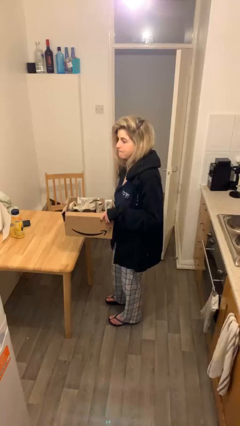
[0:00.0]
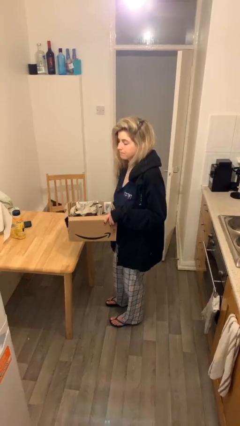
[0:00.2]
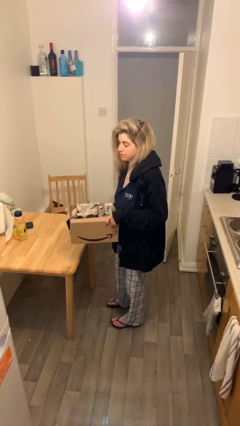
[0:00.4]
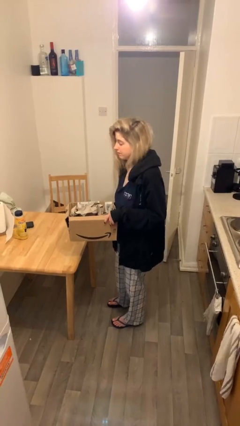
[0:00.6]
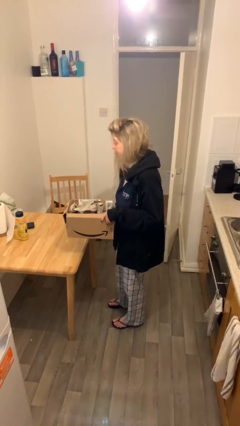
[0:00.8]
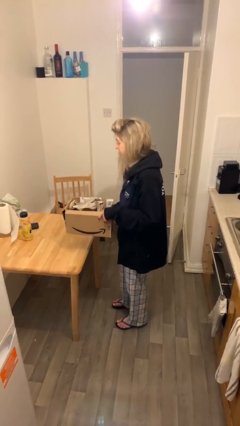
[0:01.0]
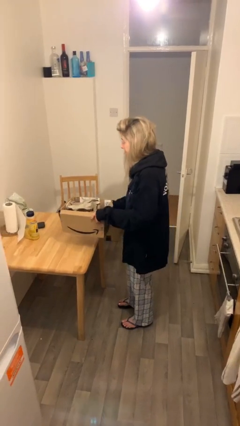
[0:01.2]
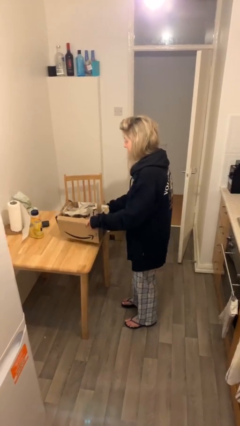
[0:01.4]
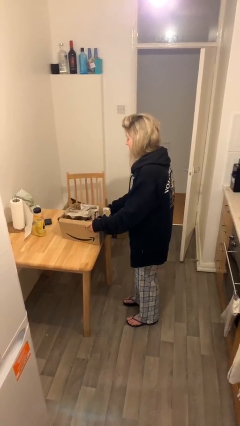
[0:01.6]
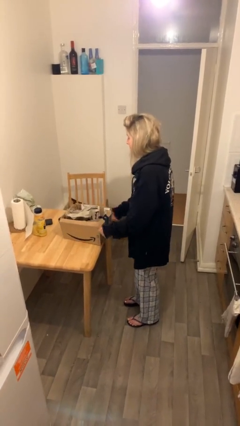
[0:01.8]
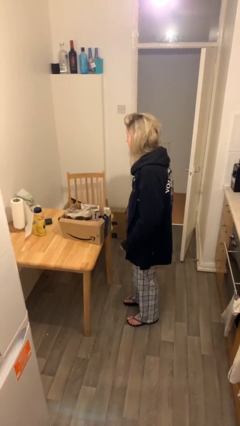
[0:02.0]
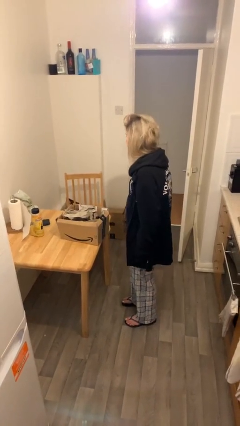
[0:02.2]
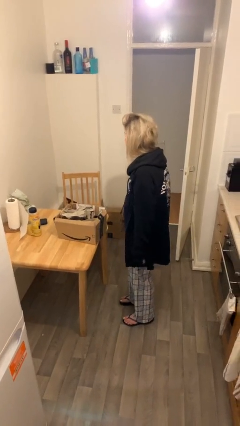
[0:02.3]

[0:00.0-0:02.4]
person puts down object on table

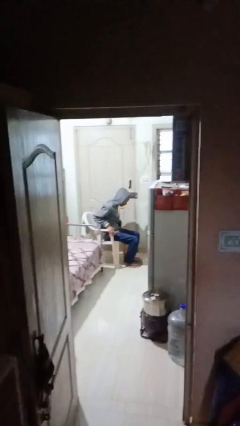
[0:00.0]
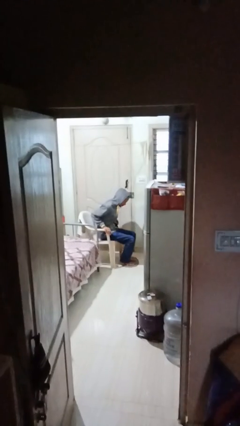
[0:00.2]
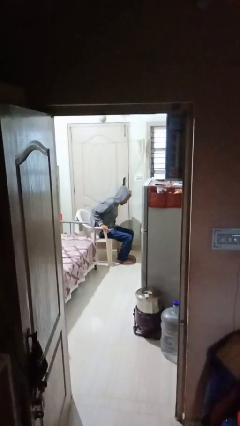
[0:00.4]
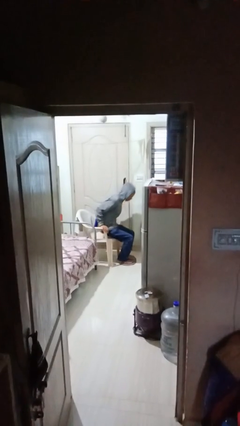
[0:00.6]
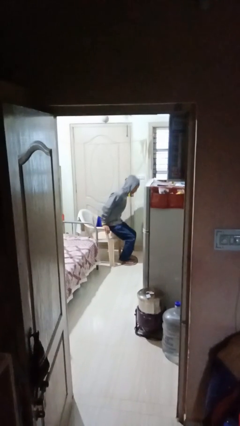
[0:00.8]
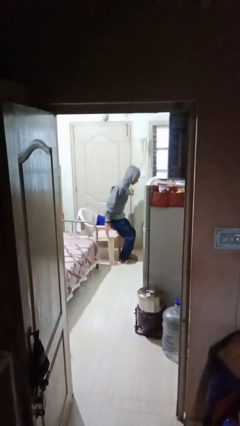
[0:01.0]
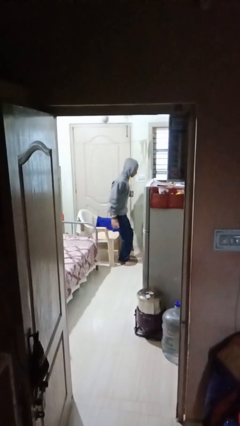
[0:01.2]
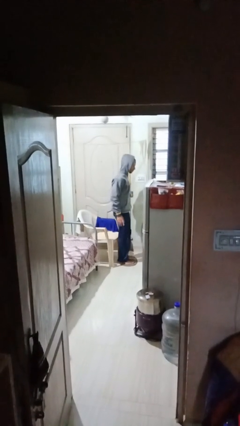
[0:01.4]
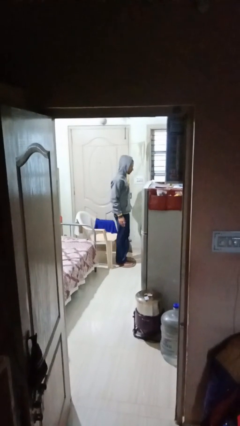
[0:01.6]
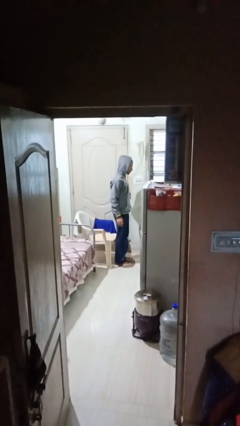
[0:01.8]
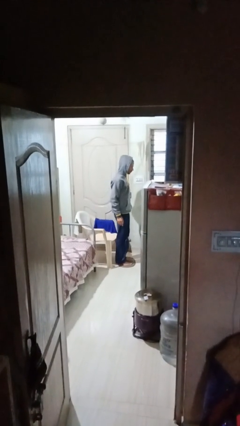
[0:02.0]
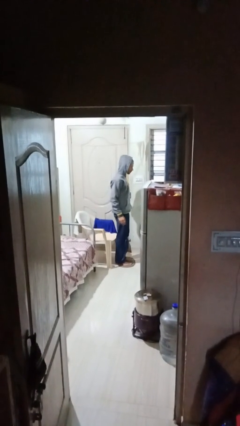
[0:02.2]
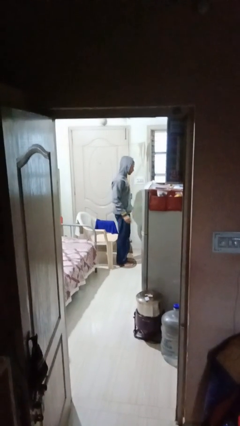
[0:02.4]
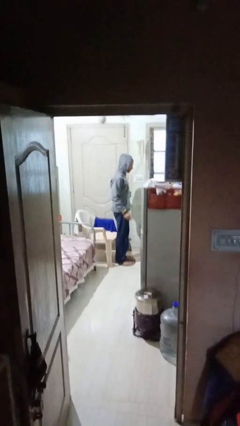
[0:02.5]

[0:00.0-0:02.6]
person stands up

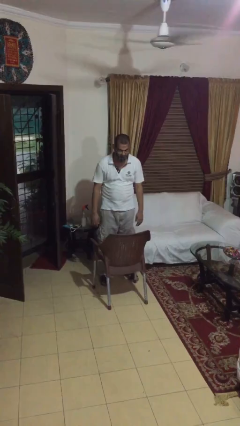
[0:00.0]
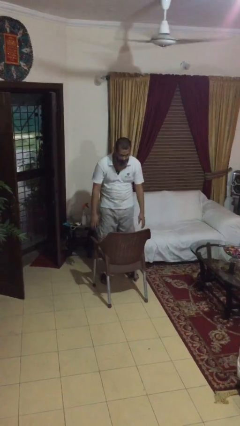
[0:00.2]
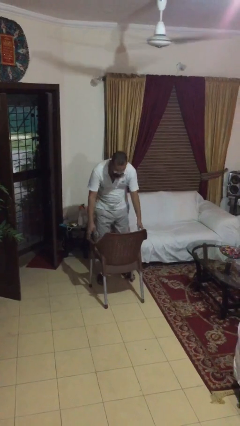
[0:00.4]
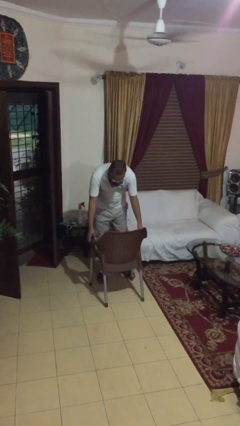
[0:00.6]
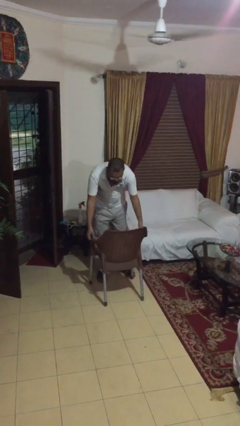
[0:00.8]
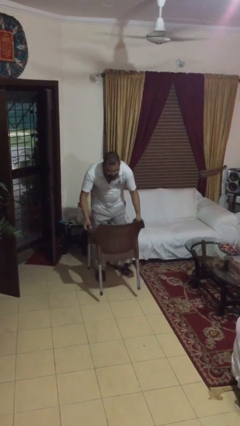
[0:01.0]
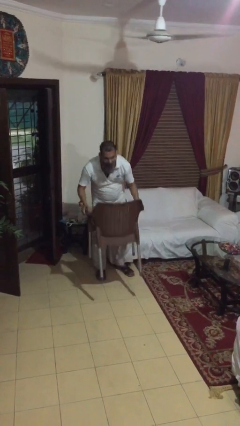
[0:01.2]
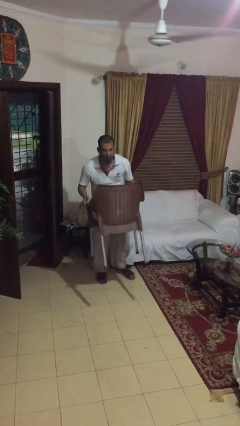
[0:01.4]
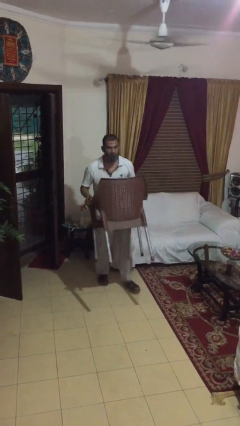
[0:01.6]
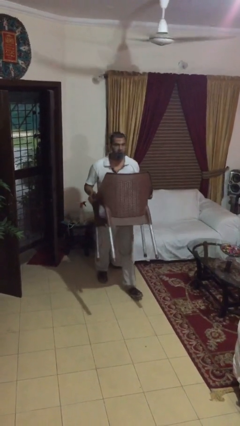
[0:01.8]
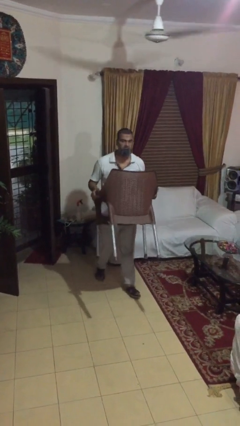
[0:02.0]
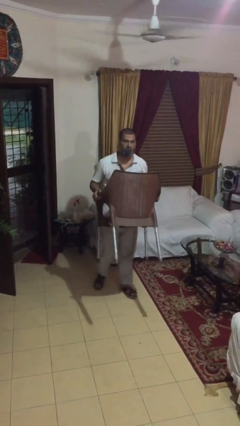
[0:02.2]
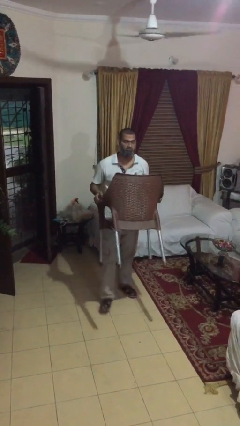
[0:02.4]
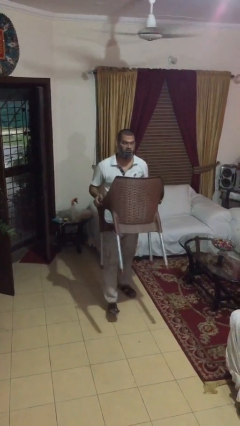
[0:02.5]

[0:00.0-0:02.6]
person carries heavy object

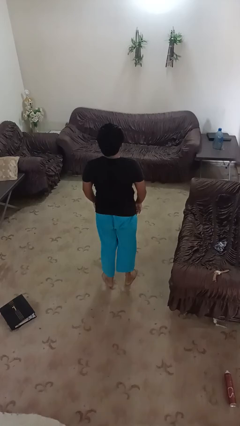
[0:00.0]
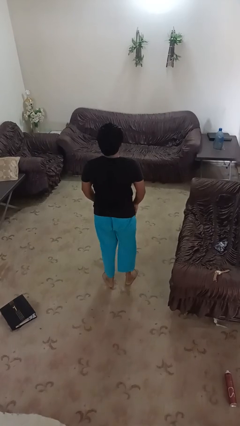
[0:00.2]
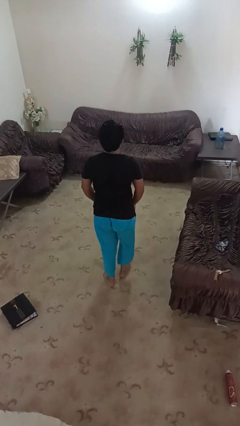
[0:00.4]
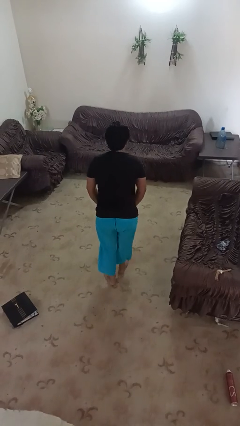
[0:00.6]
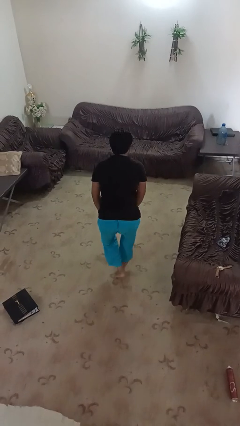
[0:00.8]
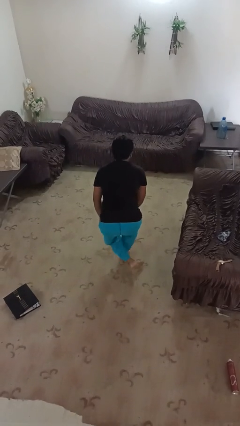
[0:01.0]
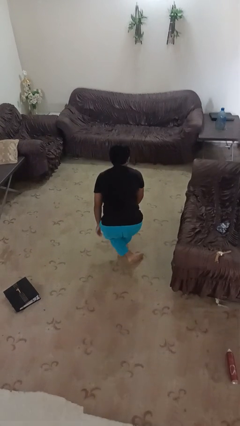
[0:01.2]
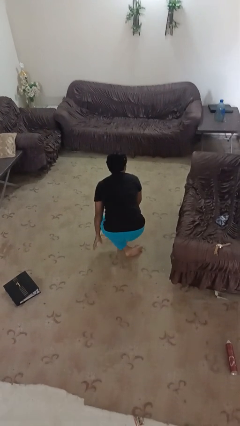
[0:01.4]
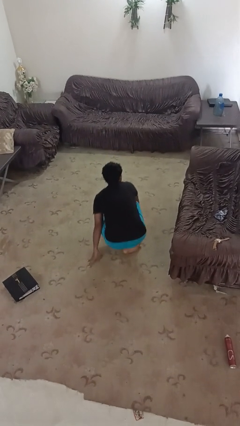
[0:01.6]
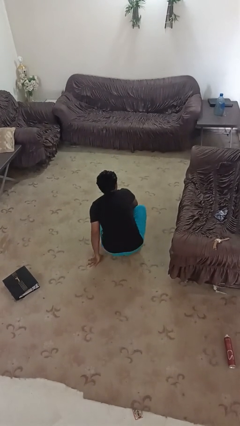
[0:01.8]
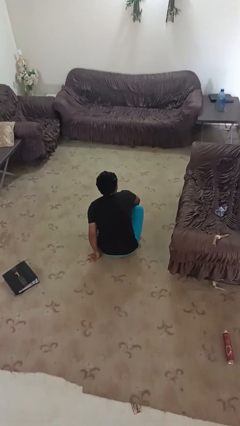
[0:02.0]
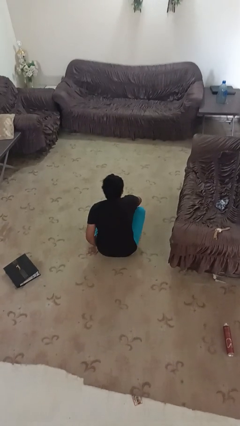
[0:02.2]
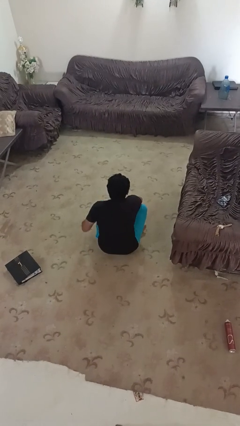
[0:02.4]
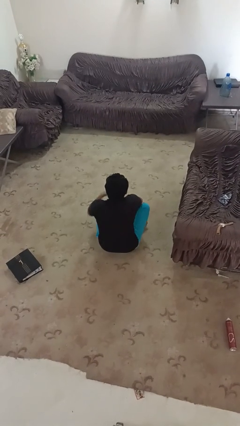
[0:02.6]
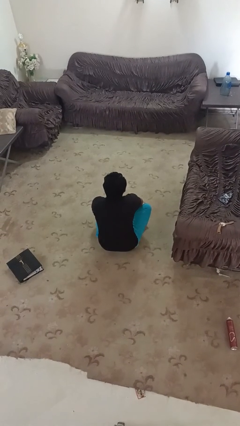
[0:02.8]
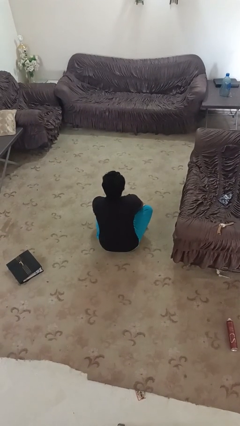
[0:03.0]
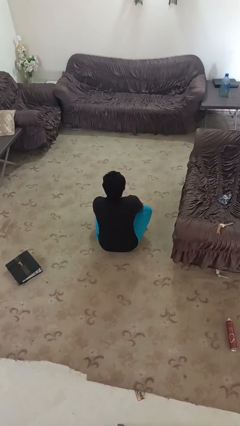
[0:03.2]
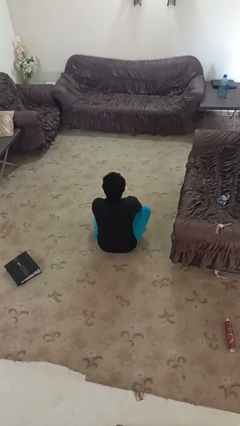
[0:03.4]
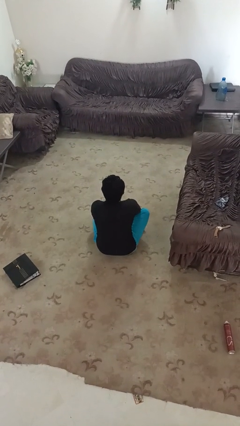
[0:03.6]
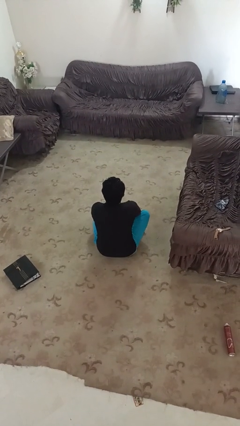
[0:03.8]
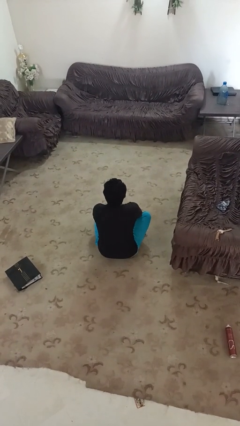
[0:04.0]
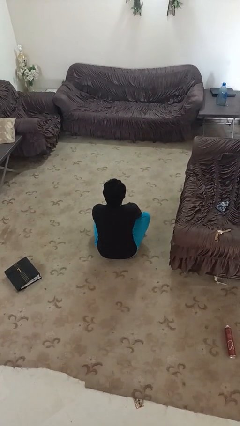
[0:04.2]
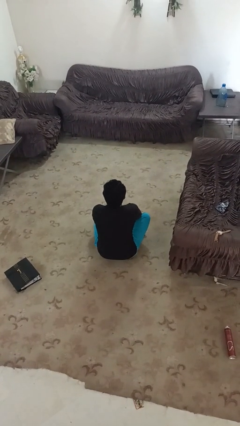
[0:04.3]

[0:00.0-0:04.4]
person sits crisscross

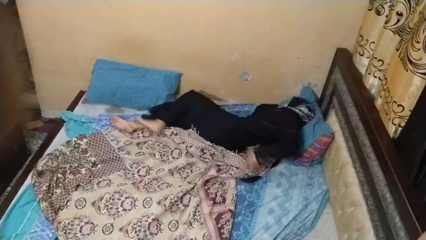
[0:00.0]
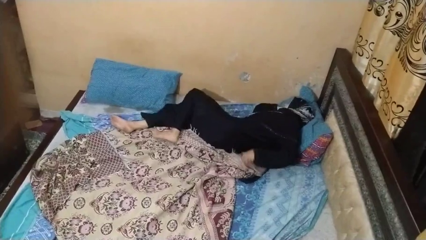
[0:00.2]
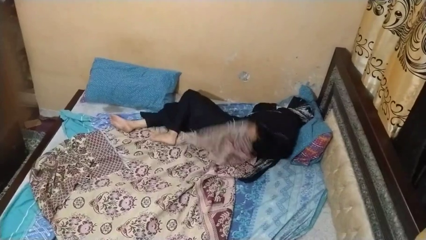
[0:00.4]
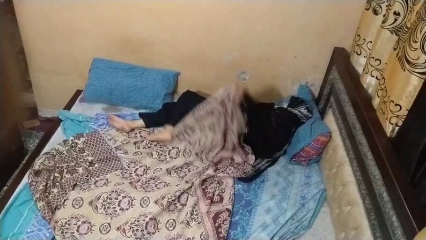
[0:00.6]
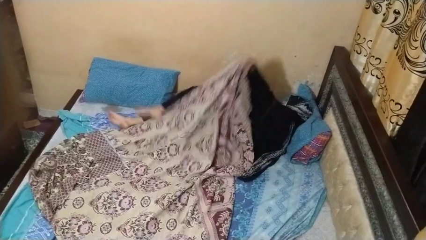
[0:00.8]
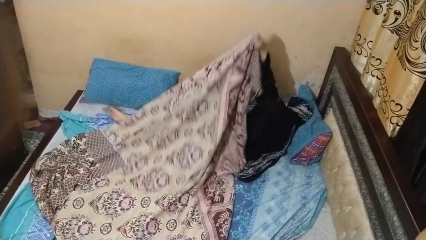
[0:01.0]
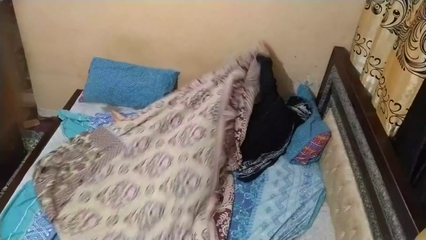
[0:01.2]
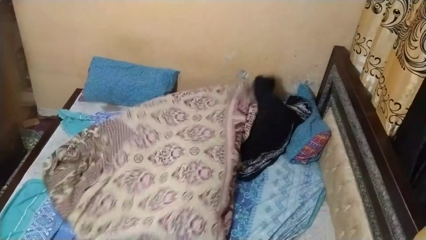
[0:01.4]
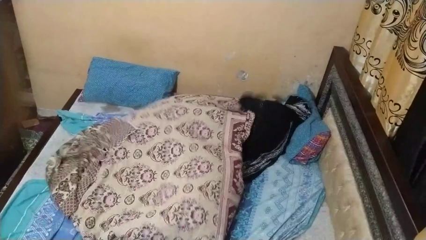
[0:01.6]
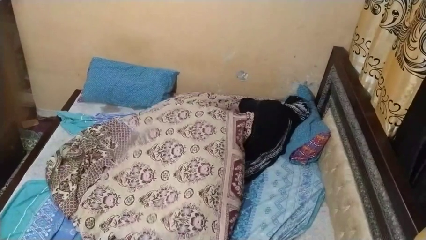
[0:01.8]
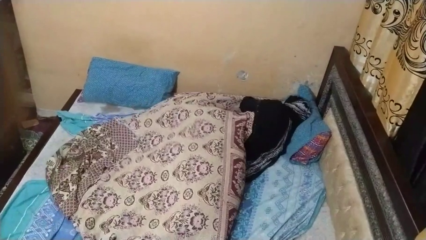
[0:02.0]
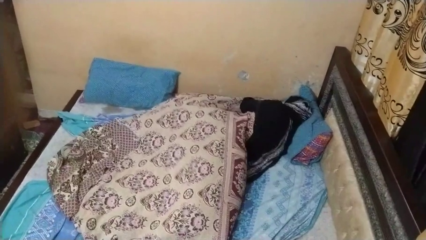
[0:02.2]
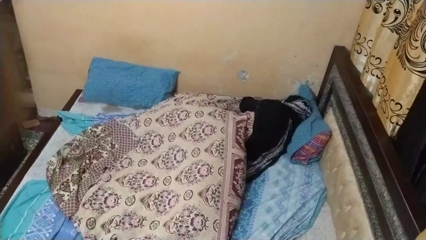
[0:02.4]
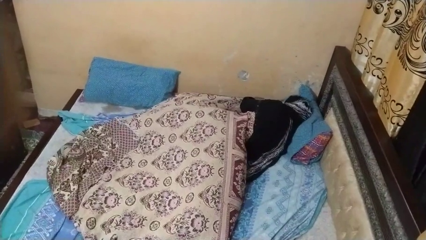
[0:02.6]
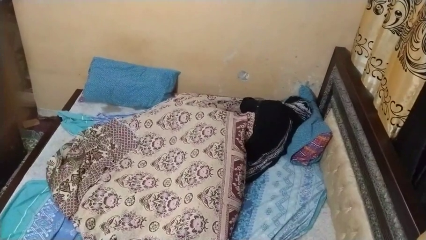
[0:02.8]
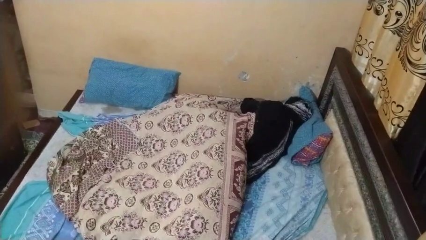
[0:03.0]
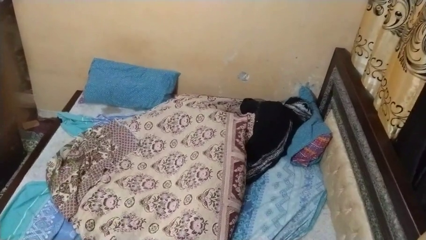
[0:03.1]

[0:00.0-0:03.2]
person covers with blanket

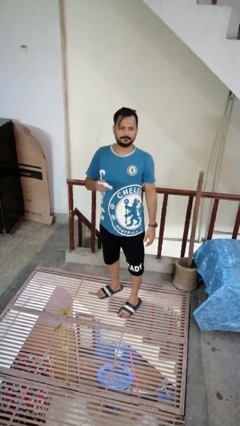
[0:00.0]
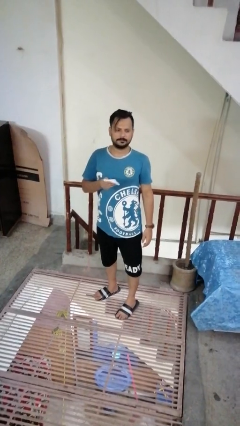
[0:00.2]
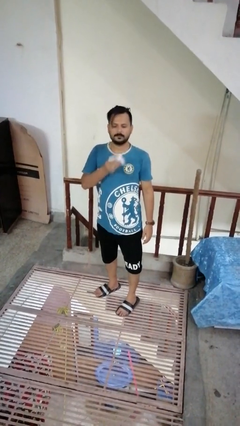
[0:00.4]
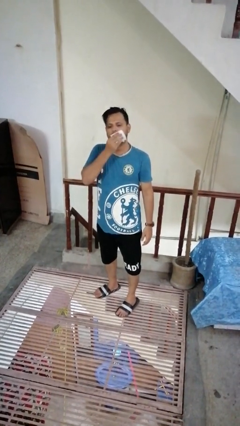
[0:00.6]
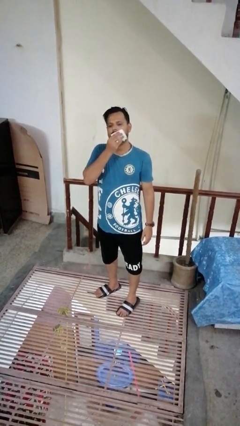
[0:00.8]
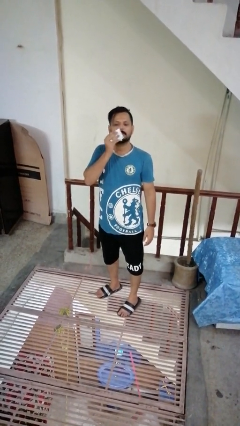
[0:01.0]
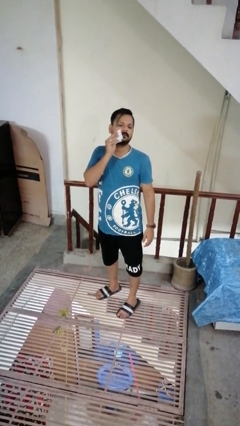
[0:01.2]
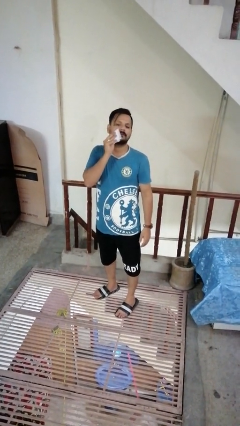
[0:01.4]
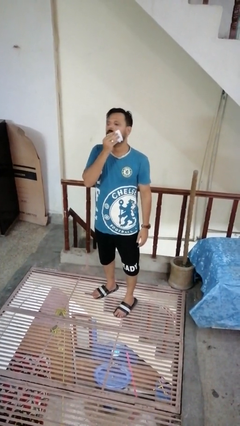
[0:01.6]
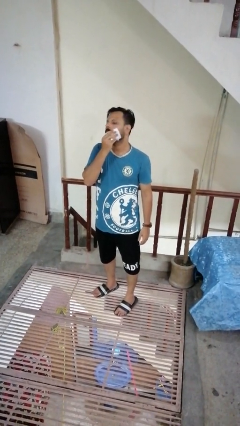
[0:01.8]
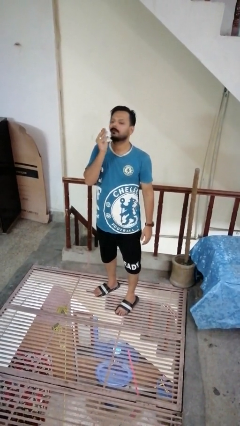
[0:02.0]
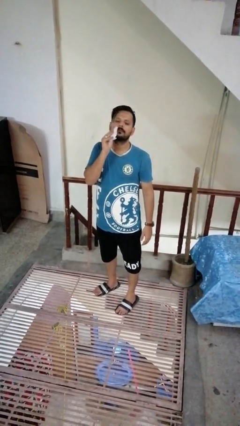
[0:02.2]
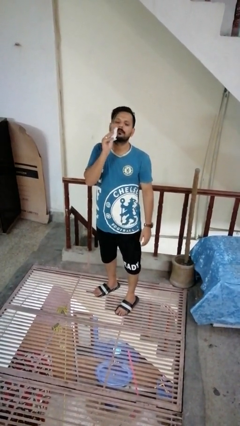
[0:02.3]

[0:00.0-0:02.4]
person wipes mouth with napkin
